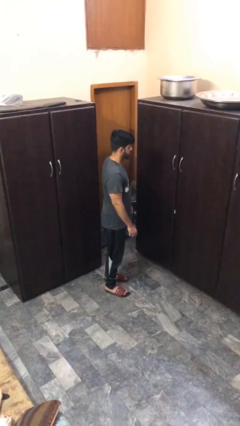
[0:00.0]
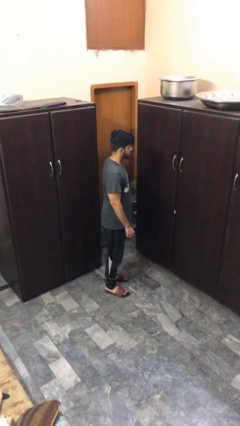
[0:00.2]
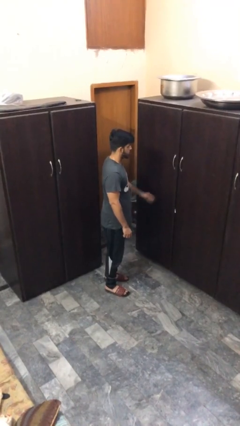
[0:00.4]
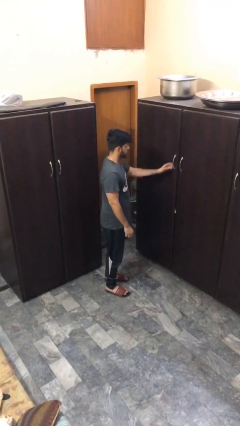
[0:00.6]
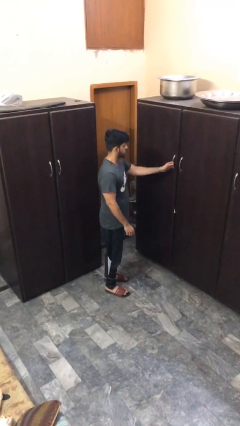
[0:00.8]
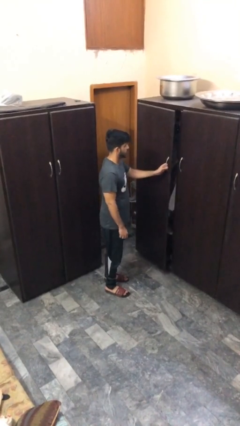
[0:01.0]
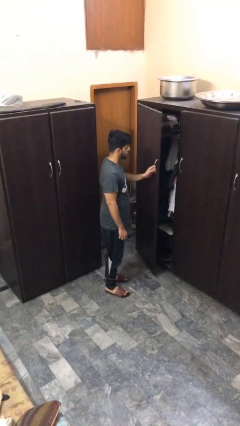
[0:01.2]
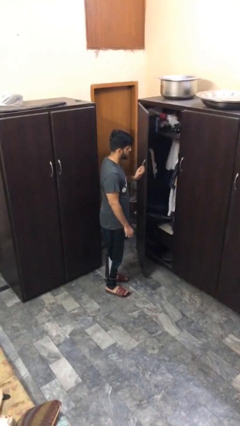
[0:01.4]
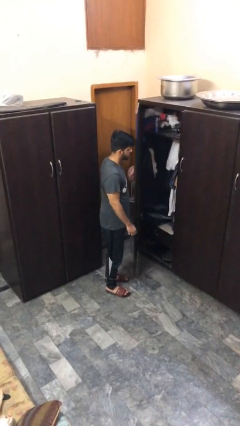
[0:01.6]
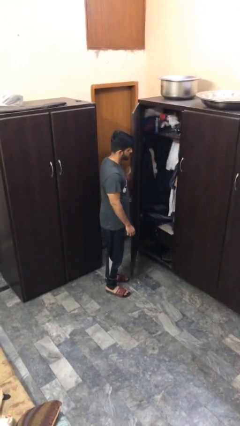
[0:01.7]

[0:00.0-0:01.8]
person opens dresser drawer

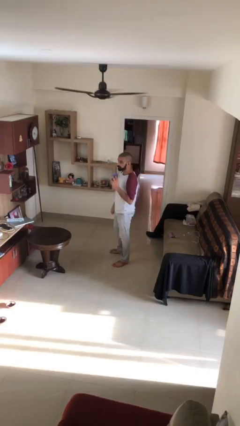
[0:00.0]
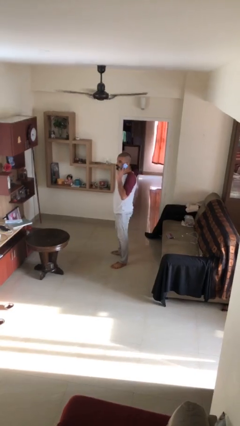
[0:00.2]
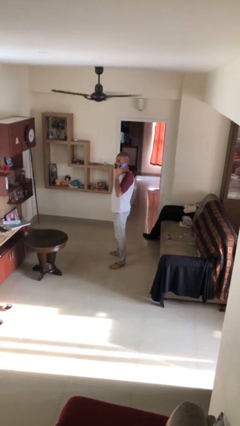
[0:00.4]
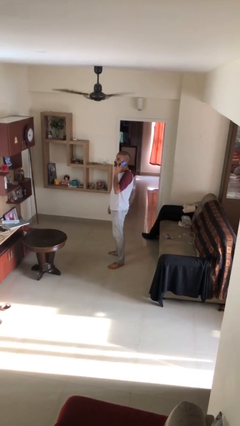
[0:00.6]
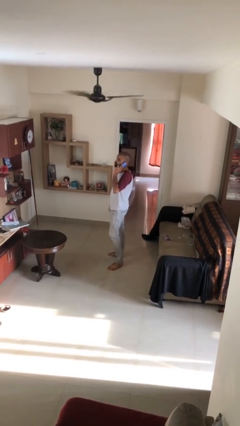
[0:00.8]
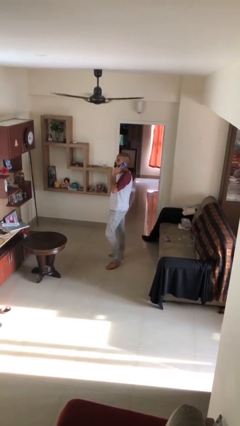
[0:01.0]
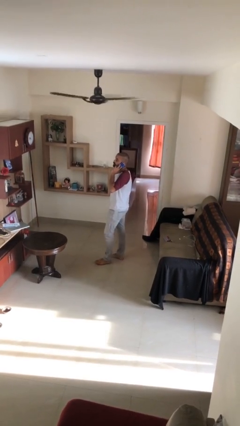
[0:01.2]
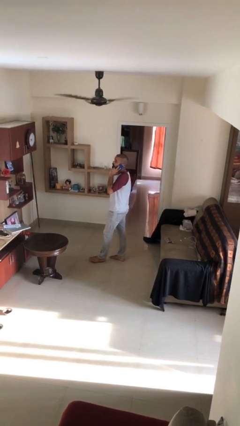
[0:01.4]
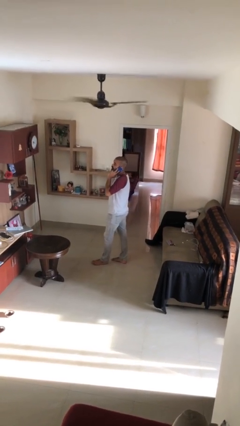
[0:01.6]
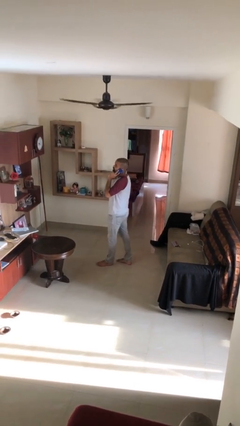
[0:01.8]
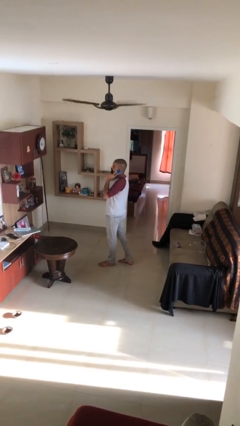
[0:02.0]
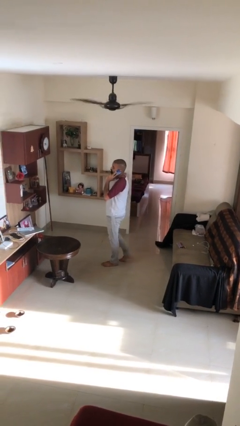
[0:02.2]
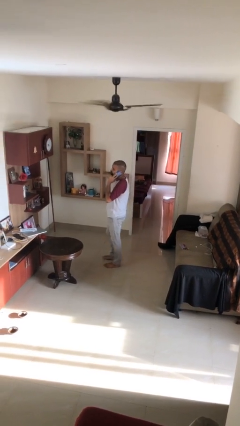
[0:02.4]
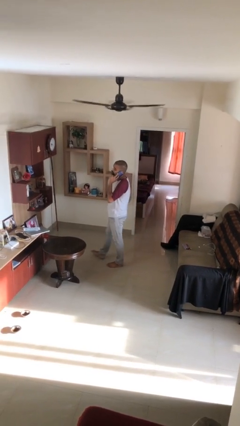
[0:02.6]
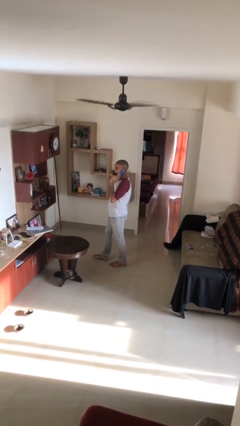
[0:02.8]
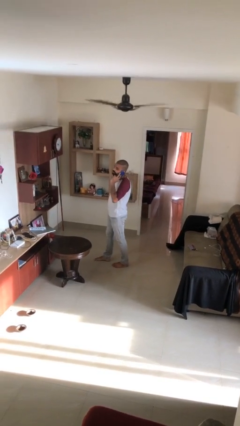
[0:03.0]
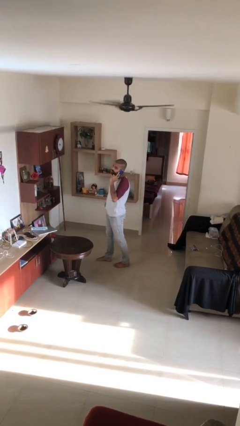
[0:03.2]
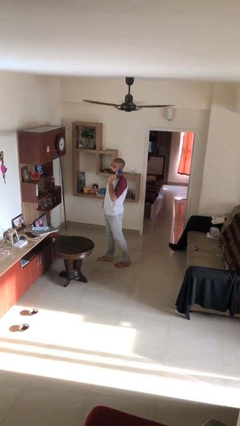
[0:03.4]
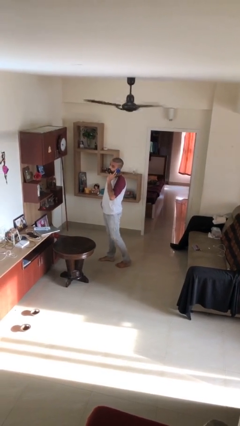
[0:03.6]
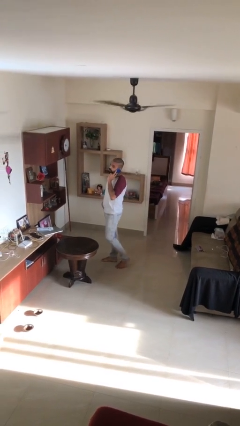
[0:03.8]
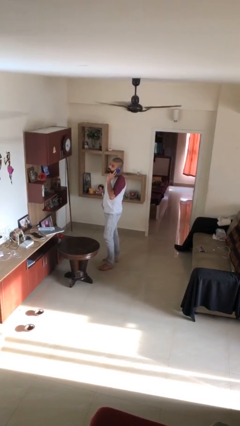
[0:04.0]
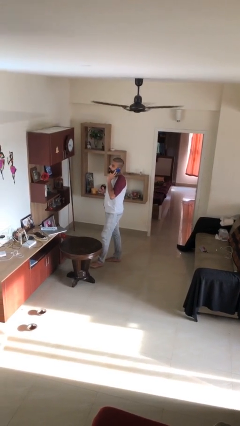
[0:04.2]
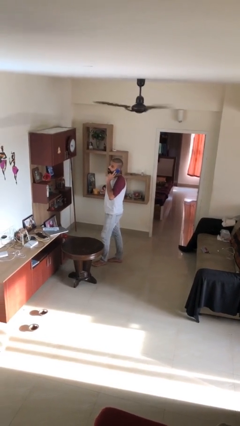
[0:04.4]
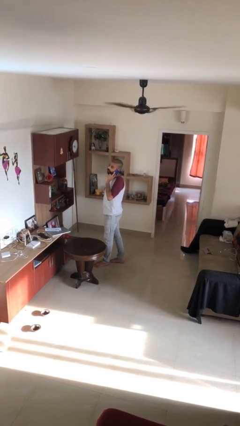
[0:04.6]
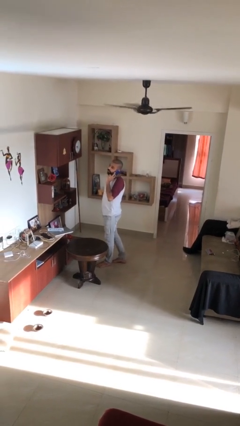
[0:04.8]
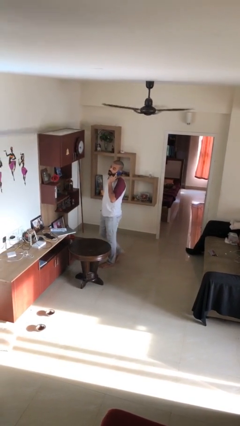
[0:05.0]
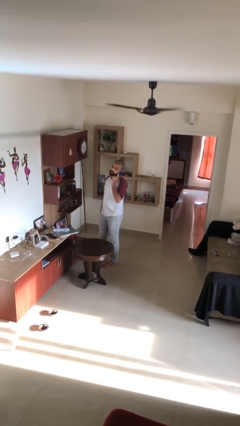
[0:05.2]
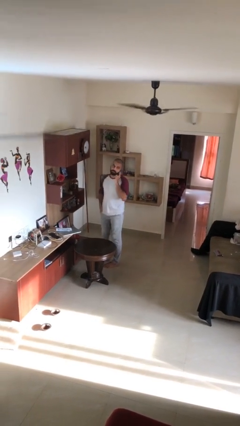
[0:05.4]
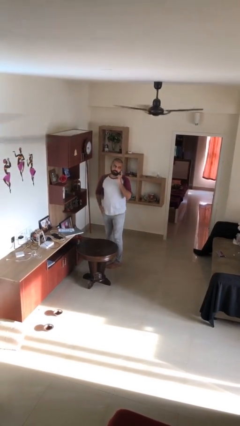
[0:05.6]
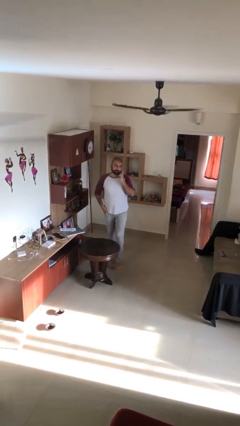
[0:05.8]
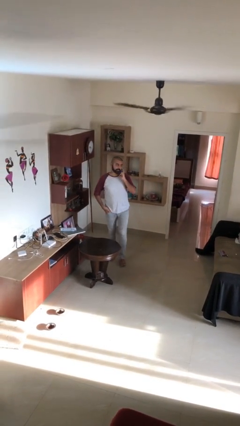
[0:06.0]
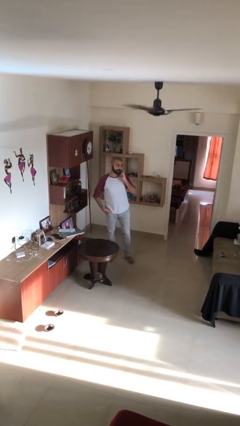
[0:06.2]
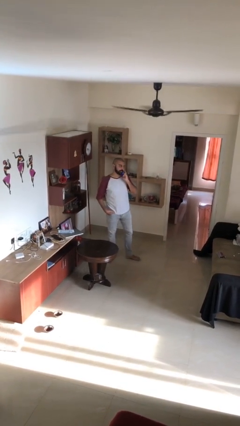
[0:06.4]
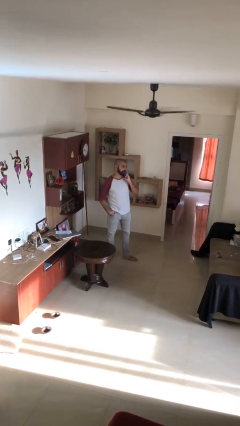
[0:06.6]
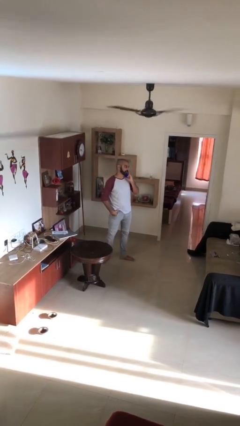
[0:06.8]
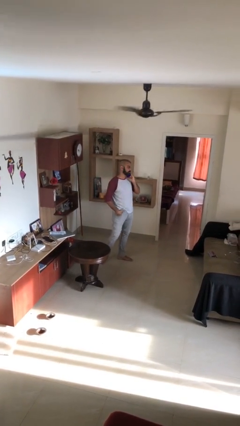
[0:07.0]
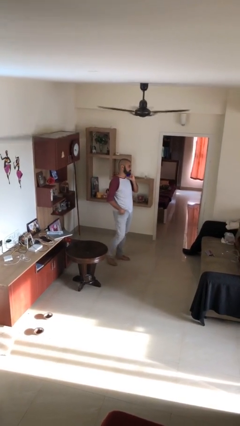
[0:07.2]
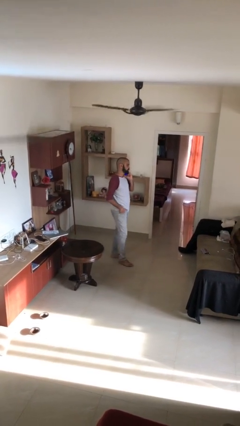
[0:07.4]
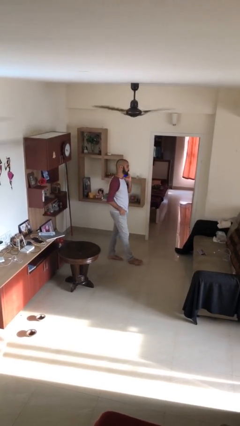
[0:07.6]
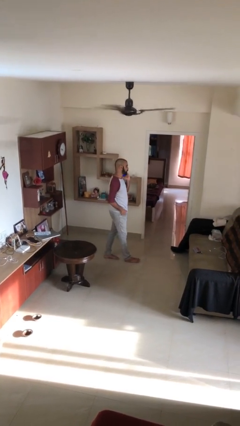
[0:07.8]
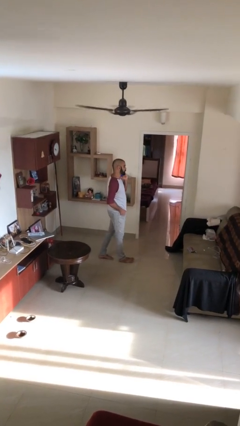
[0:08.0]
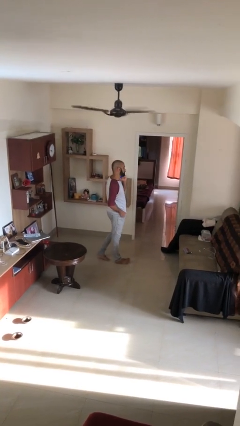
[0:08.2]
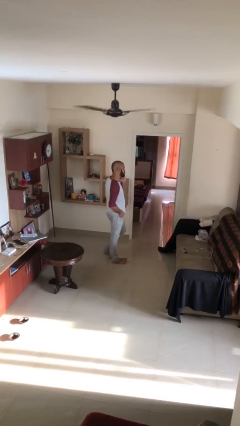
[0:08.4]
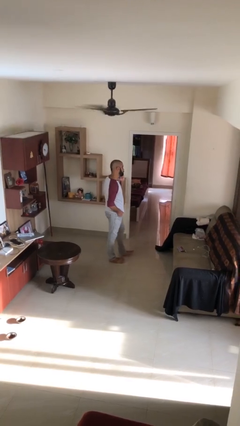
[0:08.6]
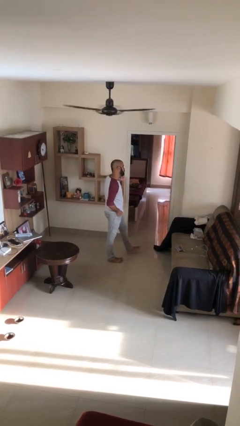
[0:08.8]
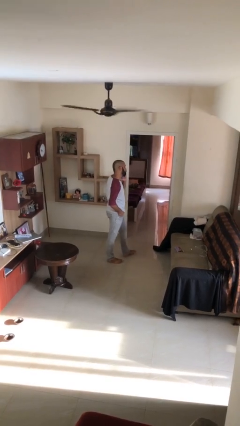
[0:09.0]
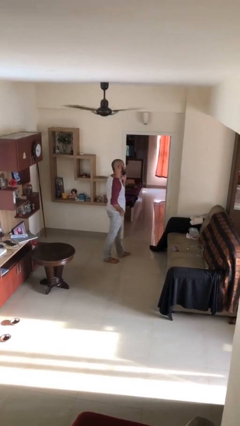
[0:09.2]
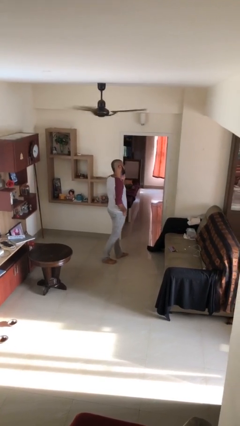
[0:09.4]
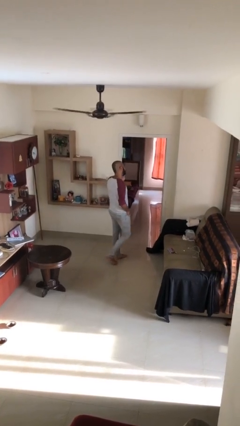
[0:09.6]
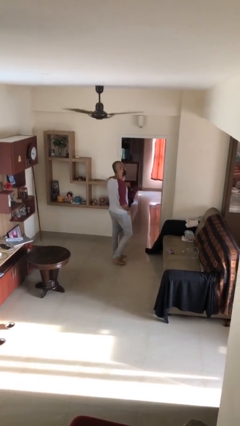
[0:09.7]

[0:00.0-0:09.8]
person talks on phone

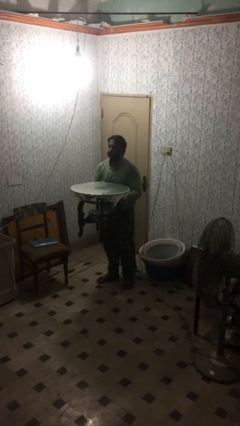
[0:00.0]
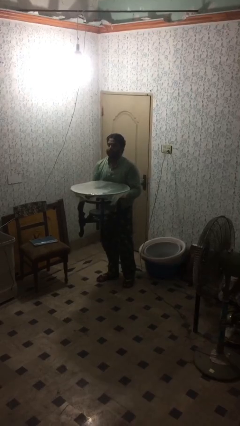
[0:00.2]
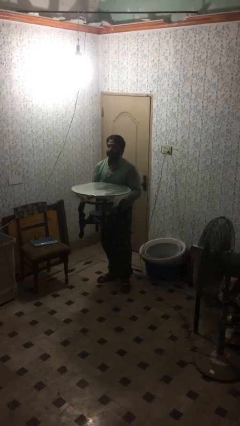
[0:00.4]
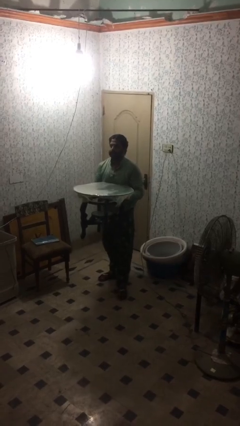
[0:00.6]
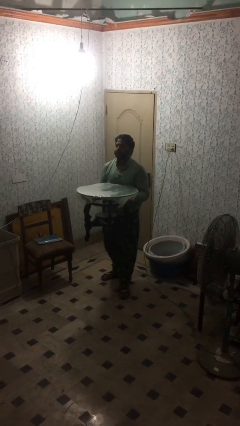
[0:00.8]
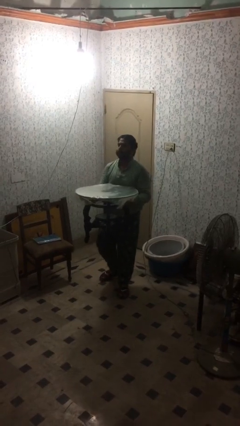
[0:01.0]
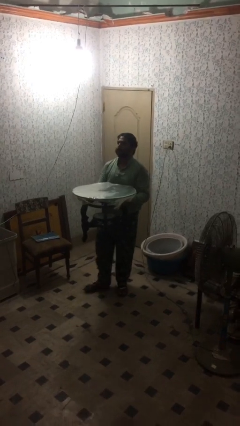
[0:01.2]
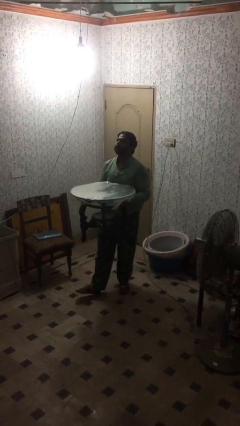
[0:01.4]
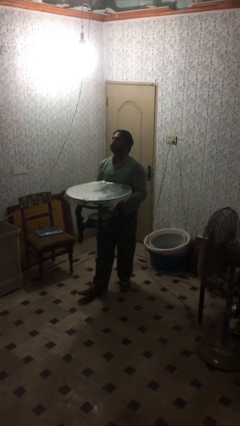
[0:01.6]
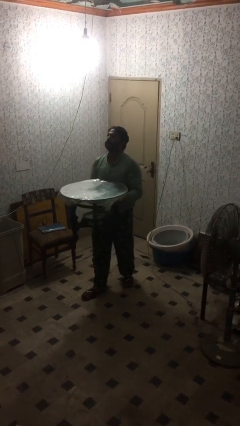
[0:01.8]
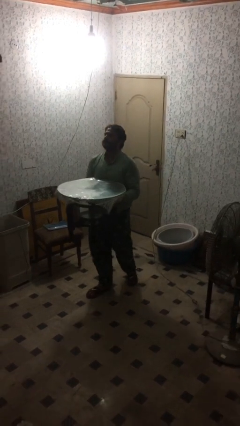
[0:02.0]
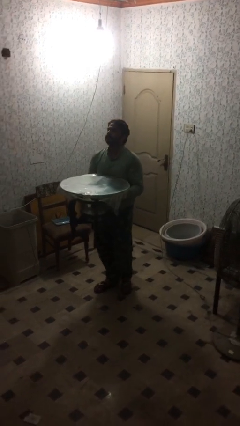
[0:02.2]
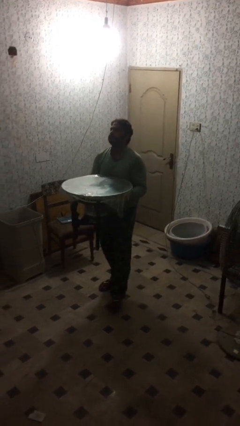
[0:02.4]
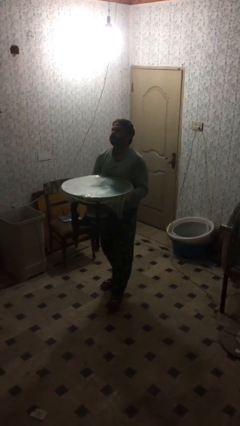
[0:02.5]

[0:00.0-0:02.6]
person carries heavy object

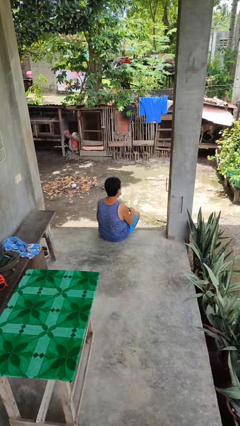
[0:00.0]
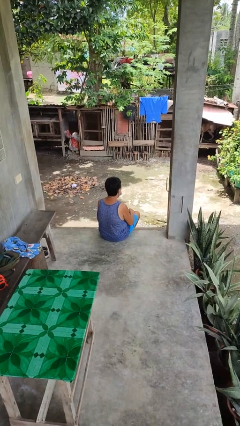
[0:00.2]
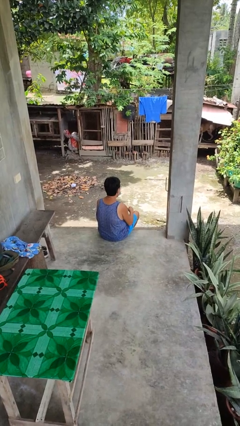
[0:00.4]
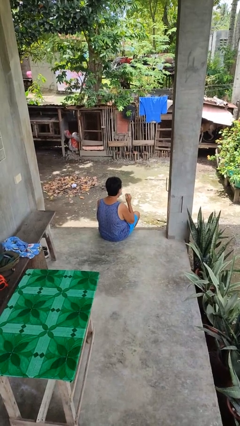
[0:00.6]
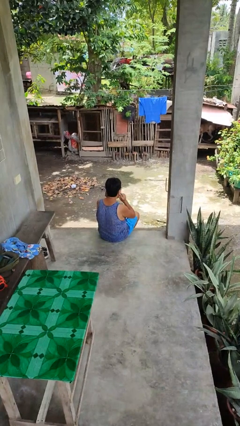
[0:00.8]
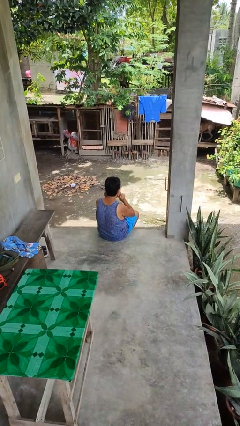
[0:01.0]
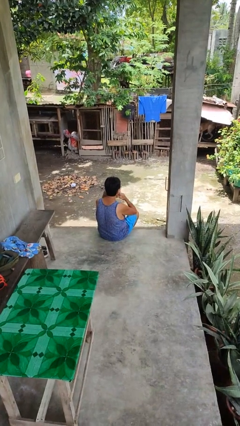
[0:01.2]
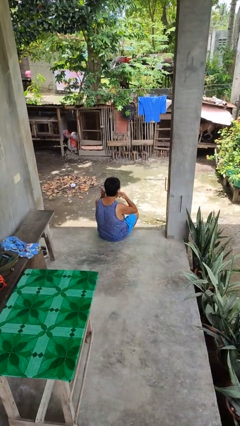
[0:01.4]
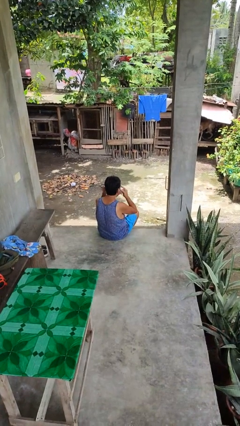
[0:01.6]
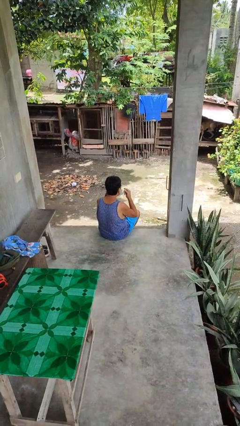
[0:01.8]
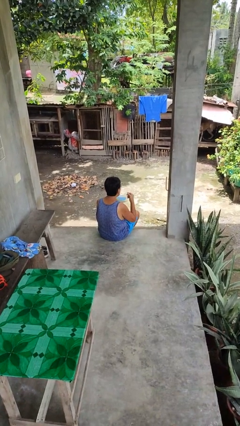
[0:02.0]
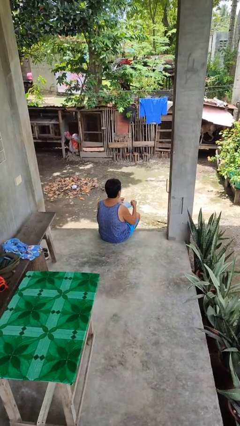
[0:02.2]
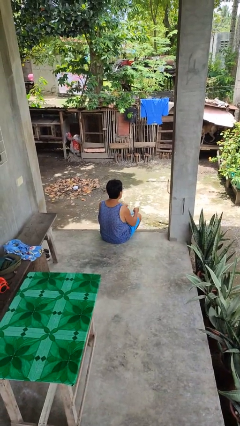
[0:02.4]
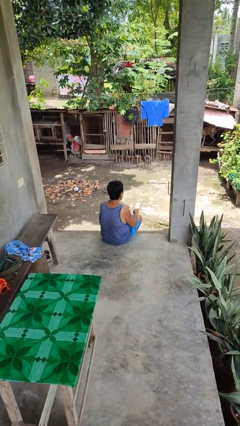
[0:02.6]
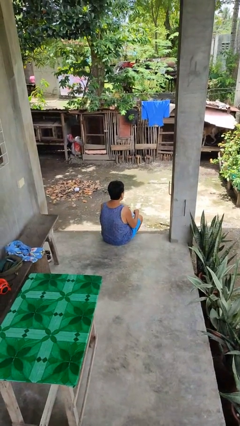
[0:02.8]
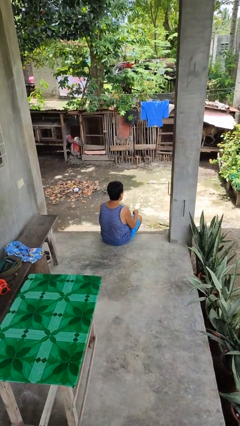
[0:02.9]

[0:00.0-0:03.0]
person takes off facemask

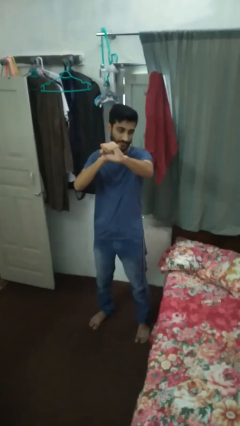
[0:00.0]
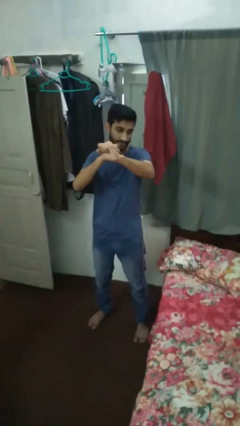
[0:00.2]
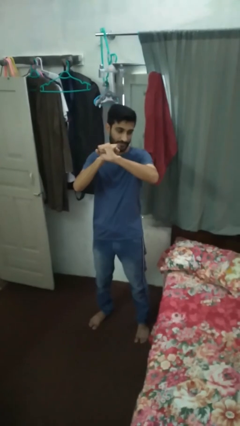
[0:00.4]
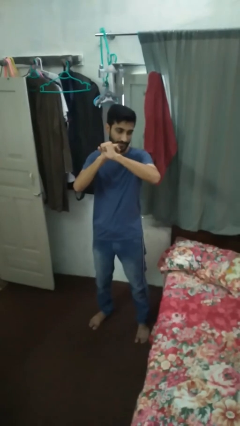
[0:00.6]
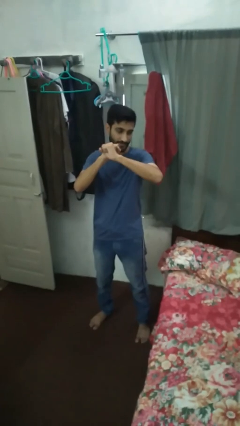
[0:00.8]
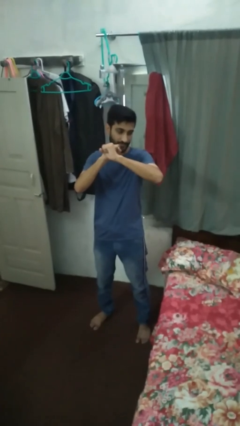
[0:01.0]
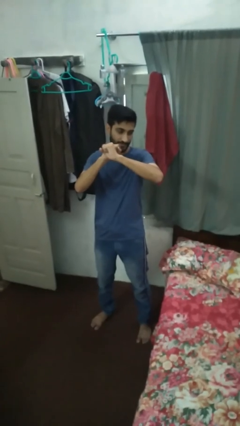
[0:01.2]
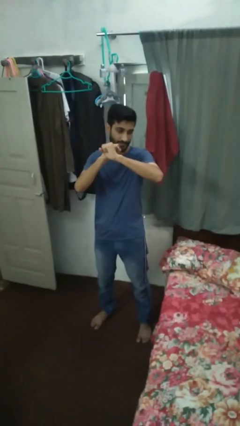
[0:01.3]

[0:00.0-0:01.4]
person gestures zoom out
